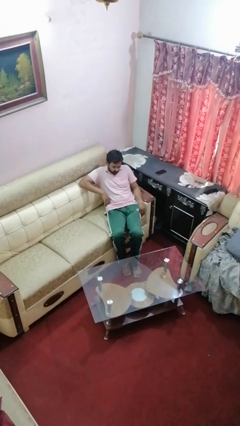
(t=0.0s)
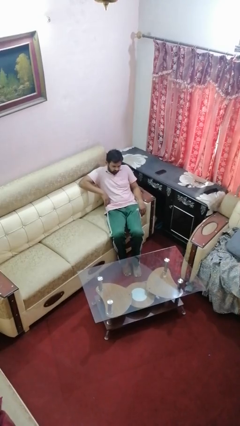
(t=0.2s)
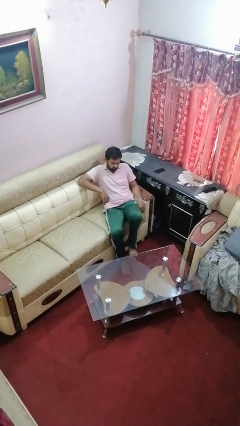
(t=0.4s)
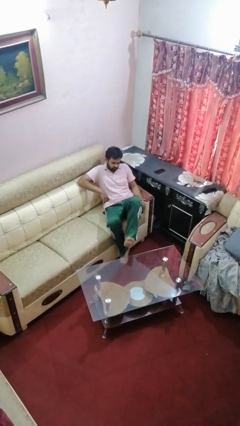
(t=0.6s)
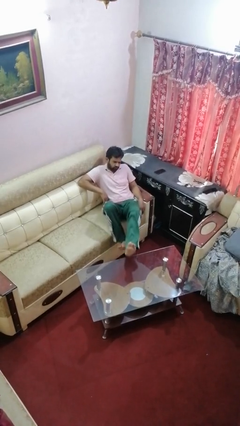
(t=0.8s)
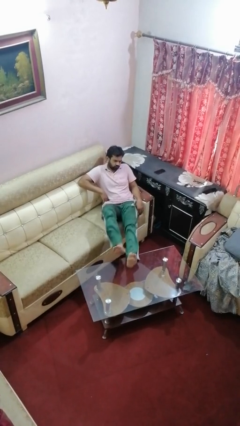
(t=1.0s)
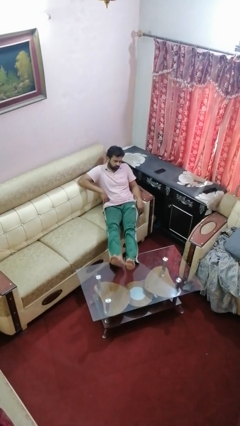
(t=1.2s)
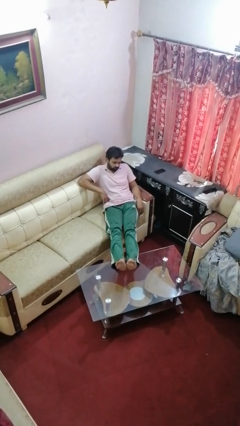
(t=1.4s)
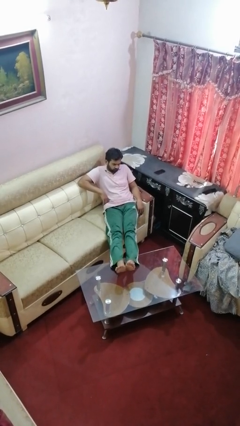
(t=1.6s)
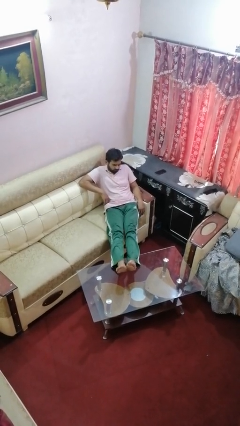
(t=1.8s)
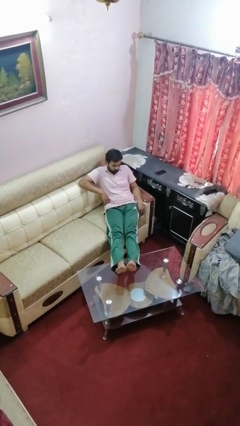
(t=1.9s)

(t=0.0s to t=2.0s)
person puts feet up

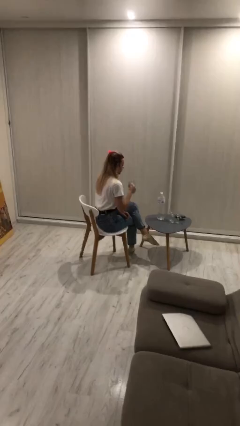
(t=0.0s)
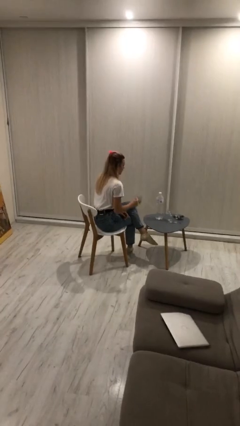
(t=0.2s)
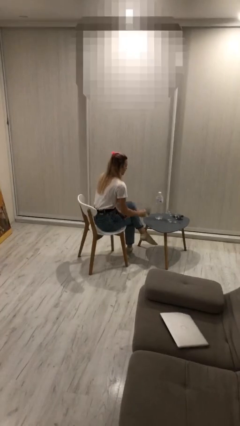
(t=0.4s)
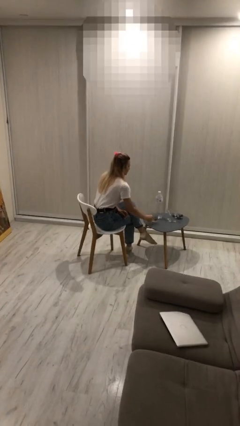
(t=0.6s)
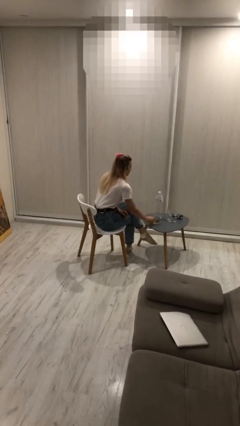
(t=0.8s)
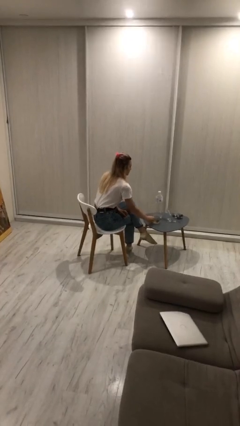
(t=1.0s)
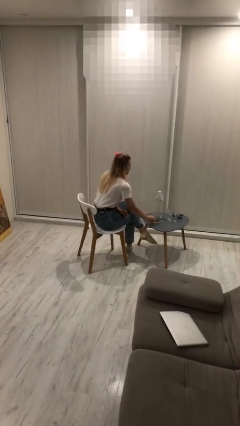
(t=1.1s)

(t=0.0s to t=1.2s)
person puts down object on table

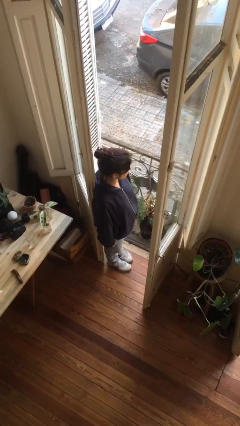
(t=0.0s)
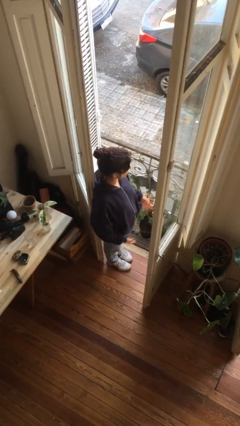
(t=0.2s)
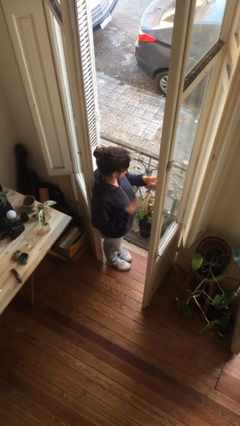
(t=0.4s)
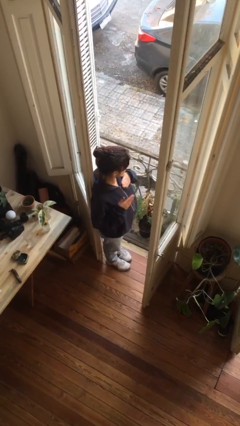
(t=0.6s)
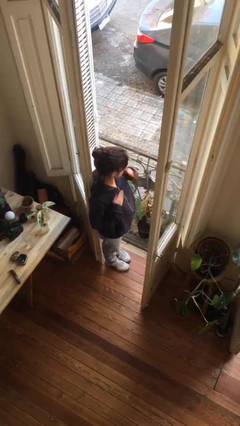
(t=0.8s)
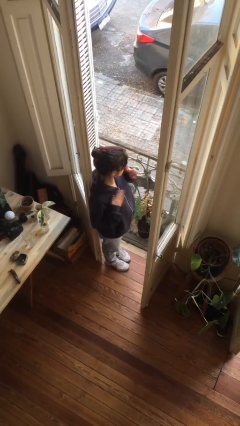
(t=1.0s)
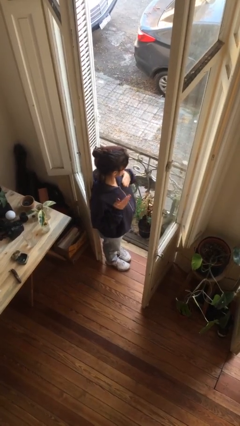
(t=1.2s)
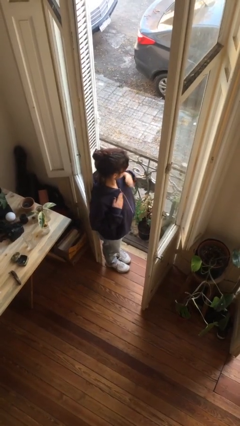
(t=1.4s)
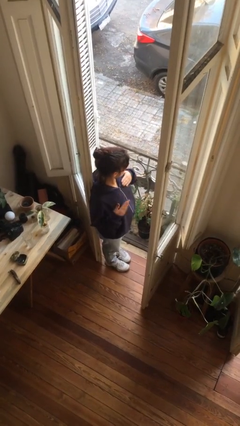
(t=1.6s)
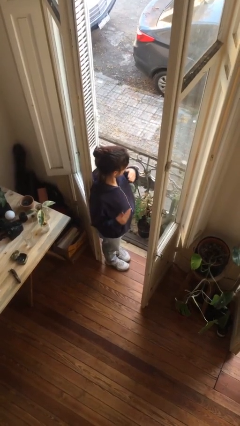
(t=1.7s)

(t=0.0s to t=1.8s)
person drums on chest

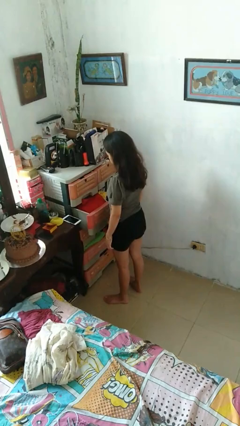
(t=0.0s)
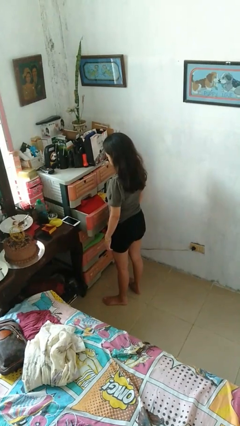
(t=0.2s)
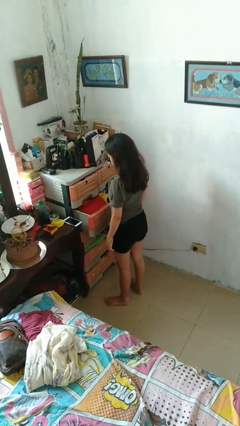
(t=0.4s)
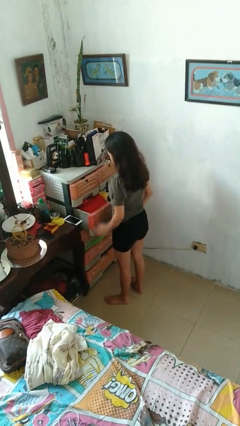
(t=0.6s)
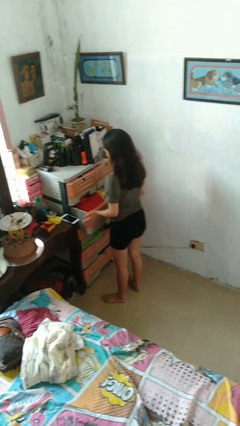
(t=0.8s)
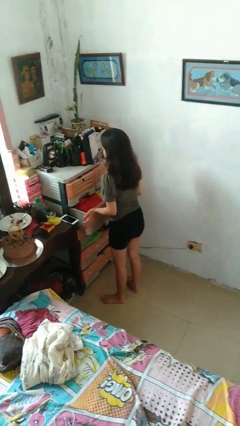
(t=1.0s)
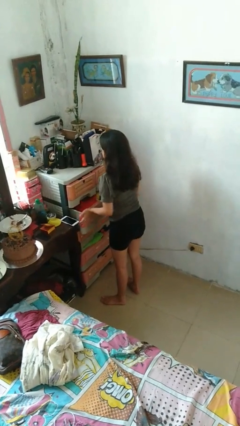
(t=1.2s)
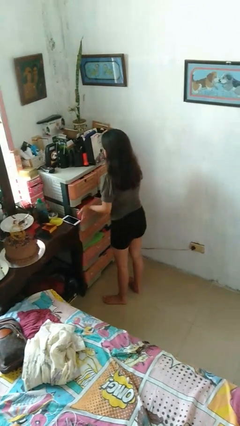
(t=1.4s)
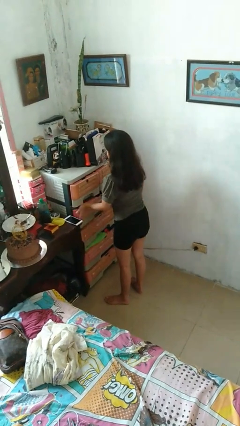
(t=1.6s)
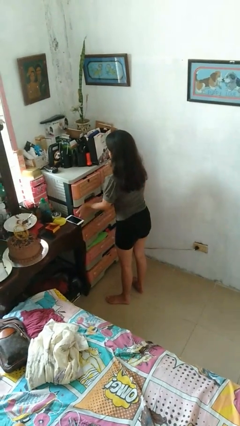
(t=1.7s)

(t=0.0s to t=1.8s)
person closes dresser drawer

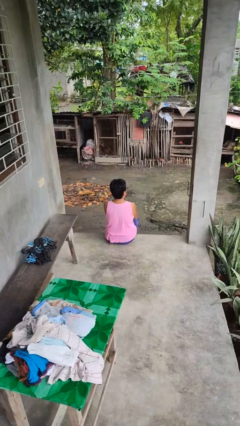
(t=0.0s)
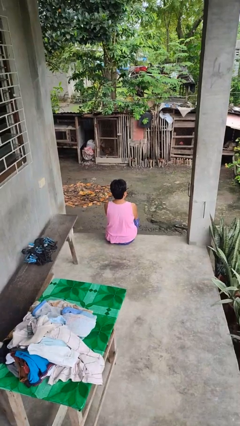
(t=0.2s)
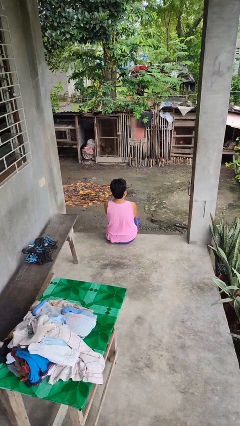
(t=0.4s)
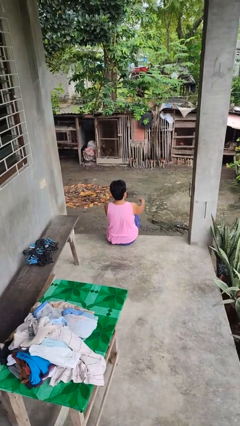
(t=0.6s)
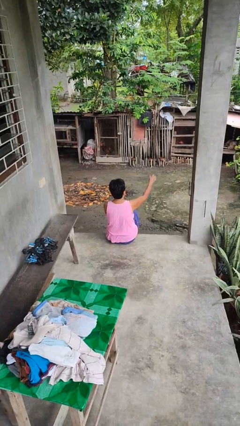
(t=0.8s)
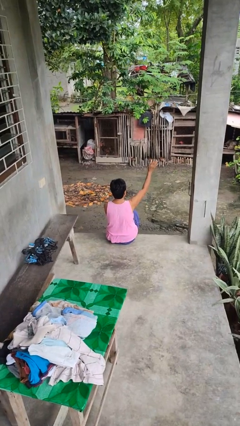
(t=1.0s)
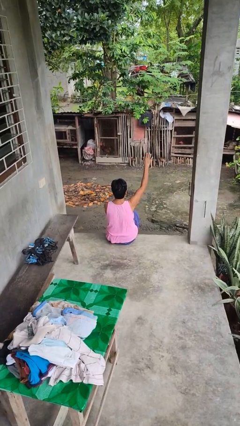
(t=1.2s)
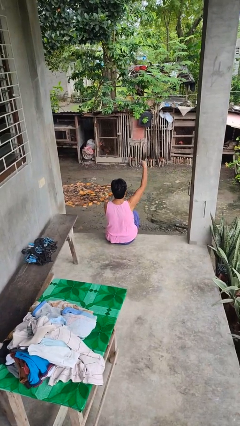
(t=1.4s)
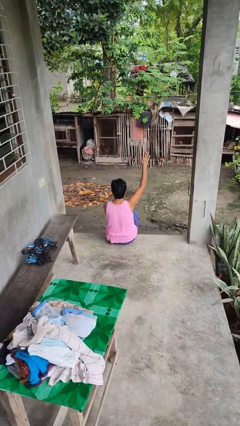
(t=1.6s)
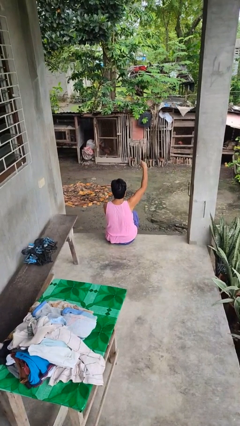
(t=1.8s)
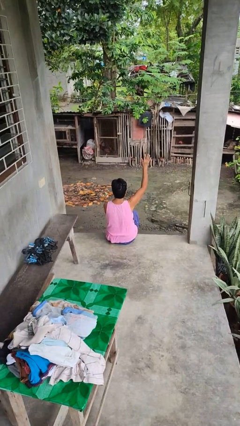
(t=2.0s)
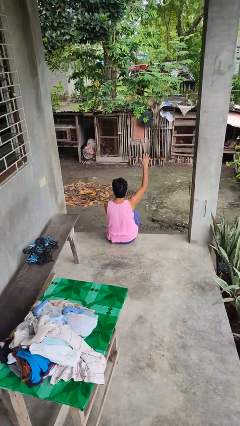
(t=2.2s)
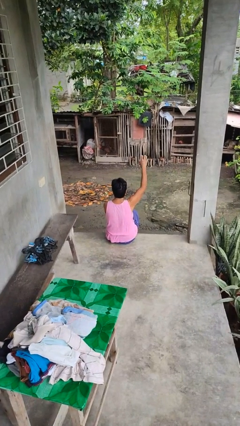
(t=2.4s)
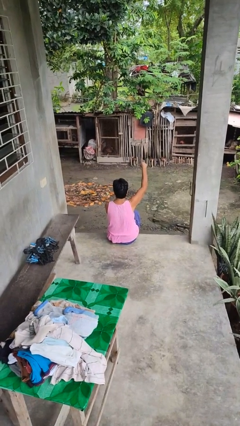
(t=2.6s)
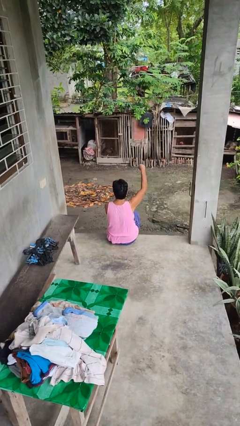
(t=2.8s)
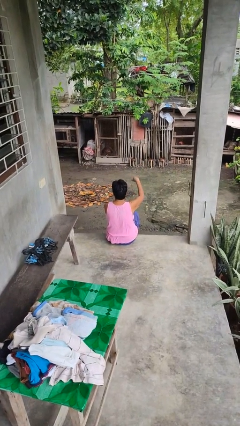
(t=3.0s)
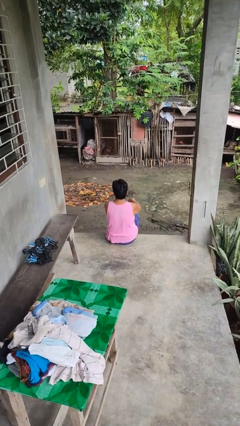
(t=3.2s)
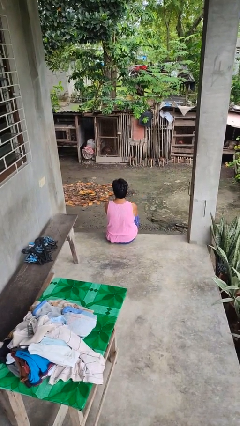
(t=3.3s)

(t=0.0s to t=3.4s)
person gestures come here

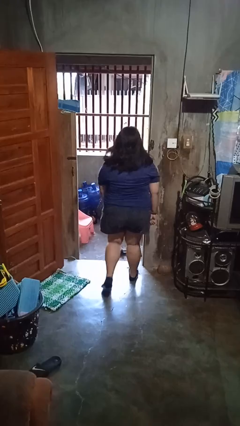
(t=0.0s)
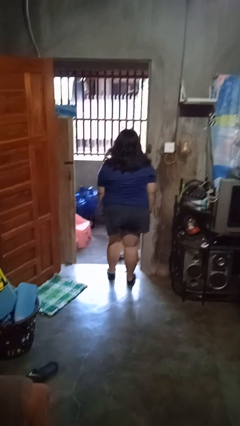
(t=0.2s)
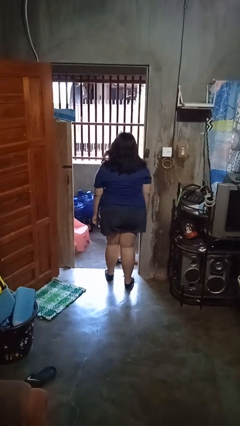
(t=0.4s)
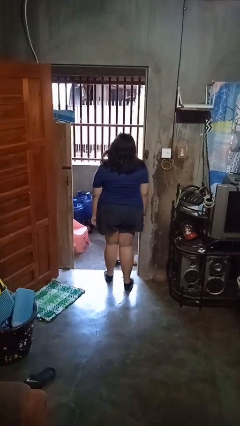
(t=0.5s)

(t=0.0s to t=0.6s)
person bumps into wall

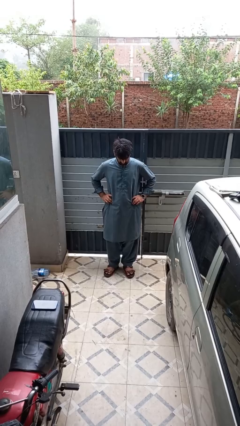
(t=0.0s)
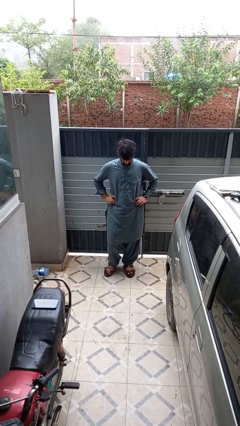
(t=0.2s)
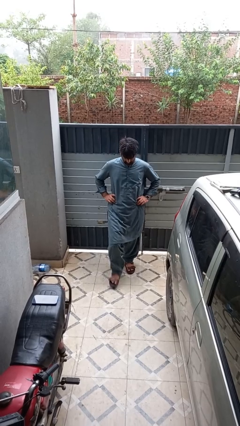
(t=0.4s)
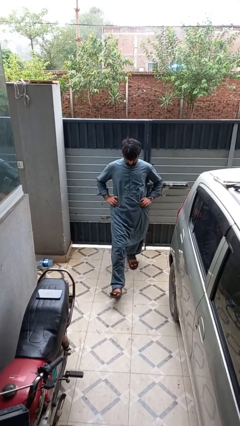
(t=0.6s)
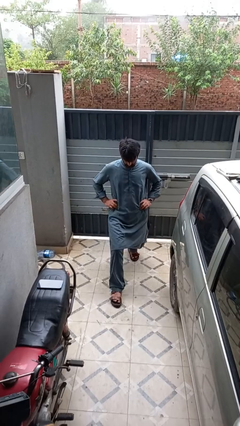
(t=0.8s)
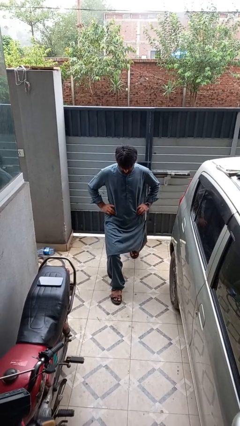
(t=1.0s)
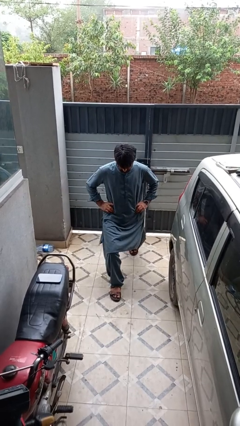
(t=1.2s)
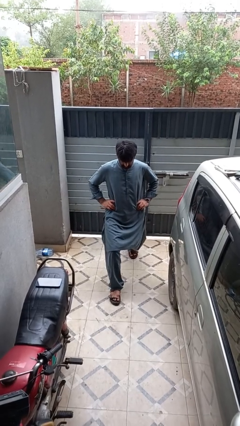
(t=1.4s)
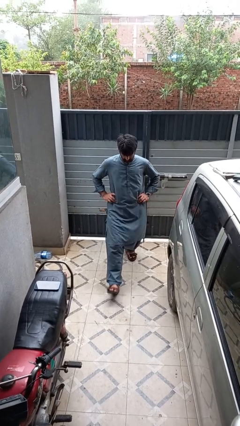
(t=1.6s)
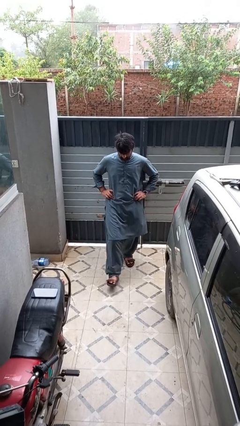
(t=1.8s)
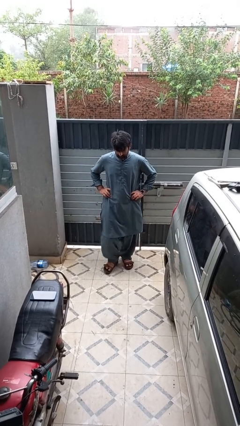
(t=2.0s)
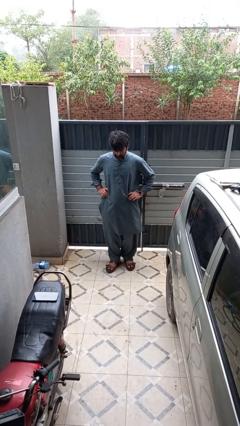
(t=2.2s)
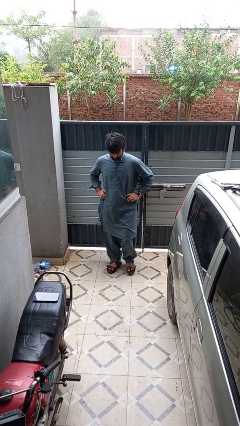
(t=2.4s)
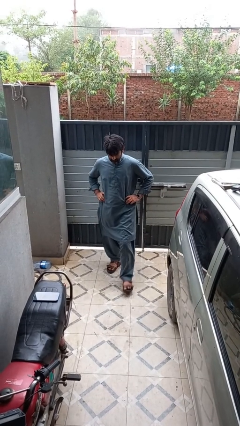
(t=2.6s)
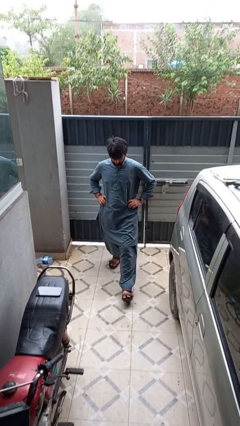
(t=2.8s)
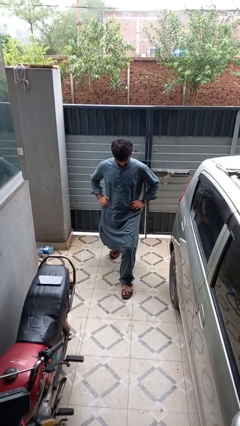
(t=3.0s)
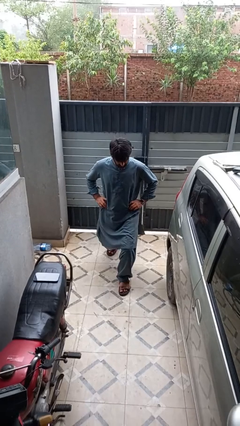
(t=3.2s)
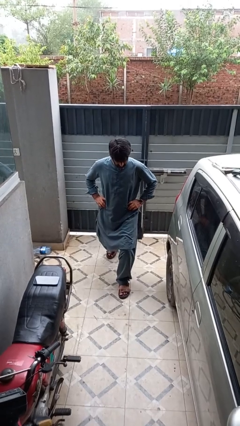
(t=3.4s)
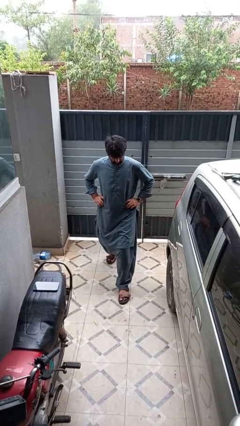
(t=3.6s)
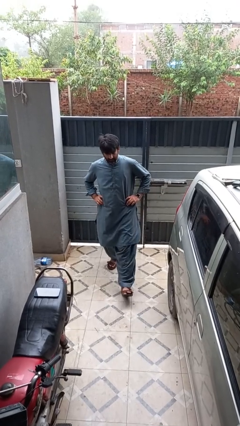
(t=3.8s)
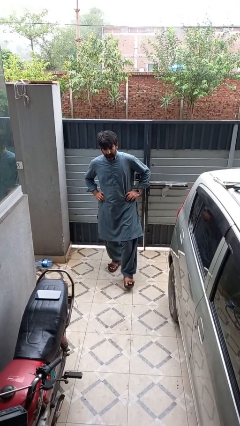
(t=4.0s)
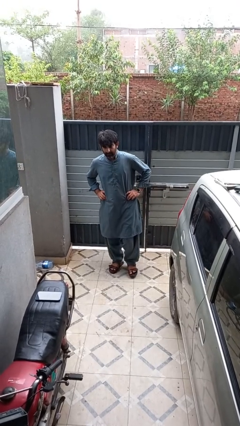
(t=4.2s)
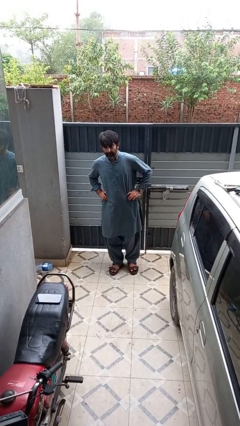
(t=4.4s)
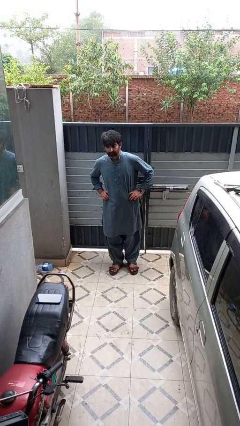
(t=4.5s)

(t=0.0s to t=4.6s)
person exercises with lunges

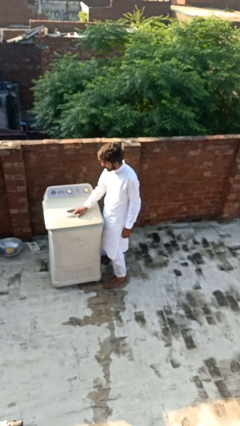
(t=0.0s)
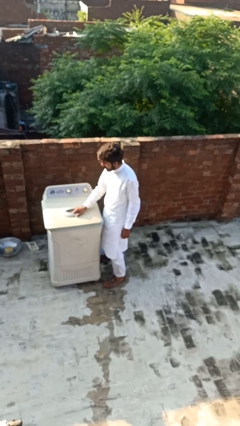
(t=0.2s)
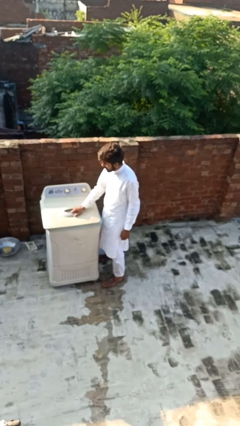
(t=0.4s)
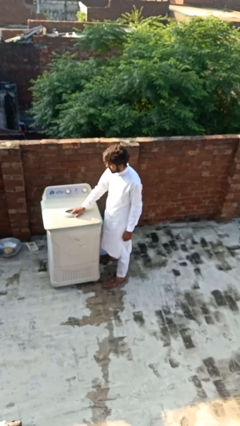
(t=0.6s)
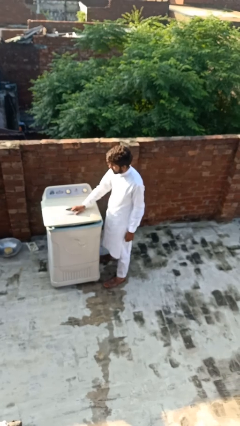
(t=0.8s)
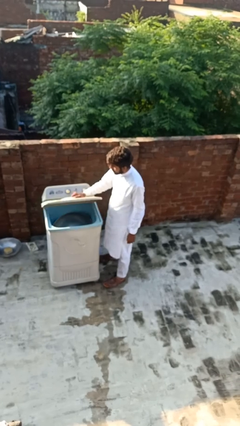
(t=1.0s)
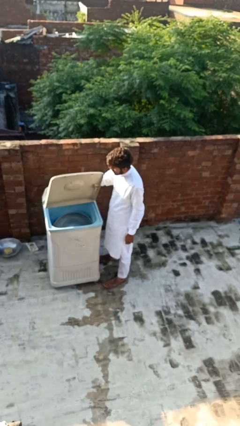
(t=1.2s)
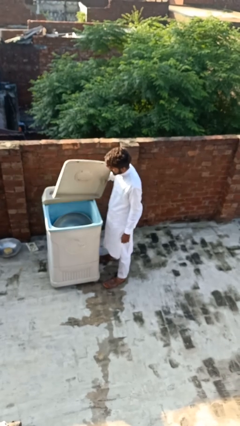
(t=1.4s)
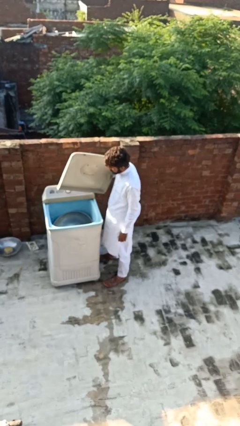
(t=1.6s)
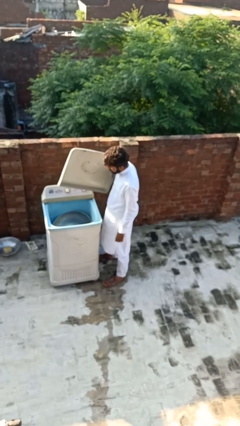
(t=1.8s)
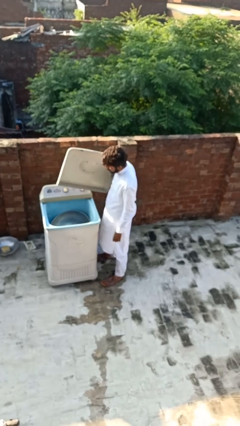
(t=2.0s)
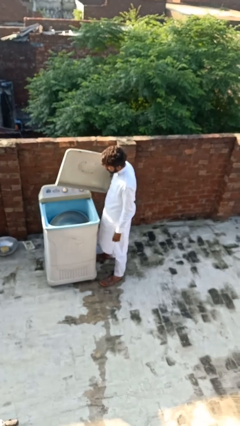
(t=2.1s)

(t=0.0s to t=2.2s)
person opens clothes washer
